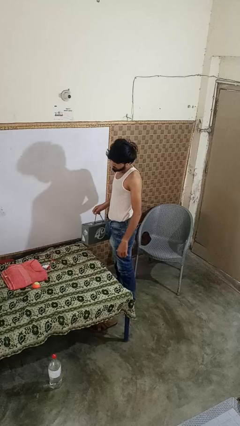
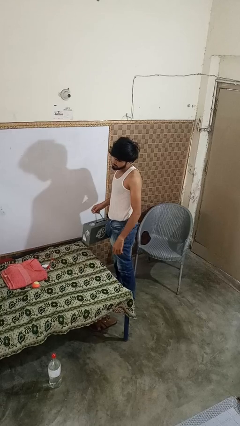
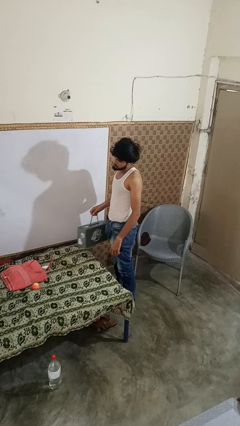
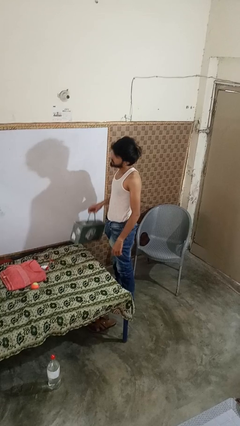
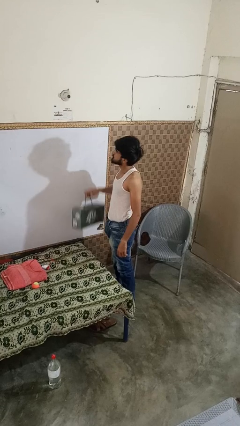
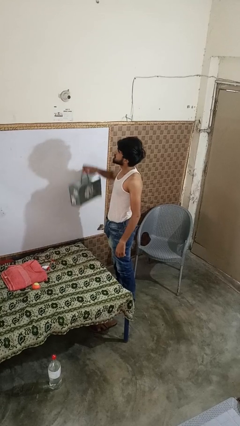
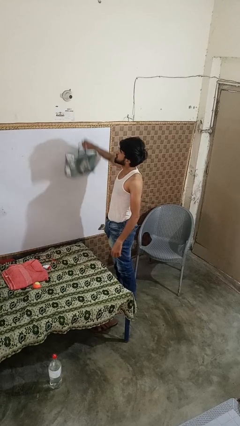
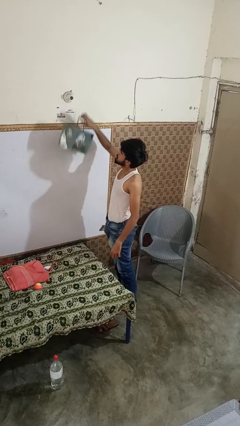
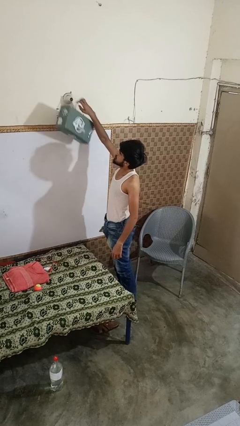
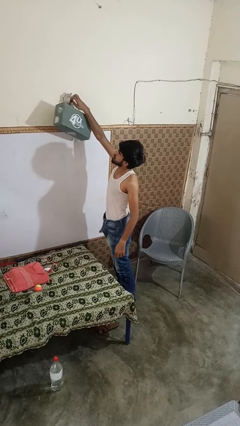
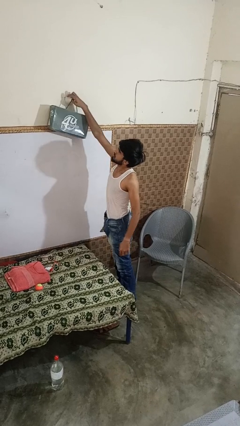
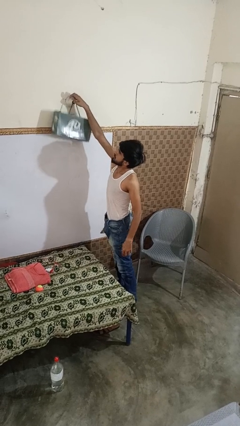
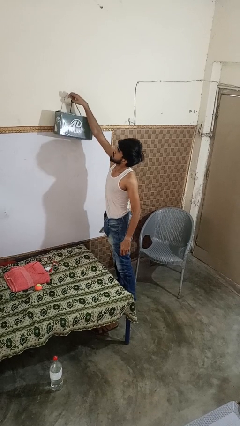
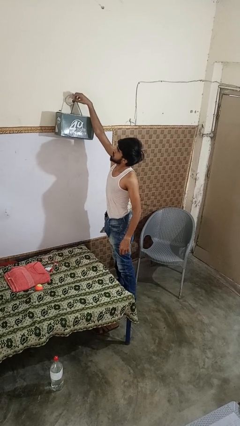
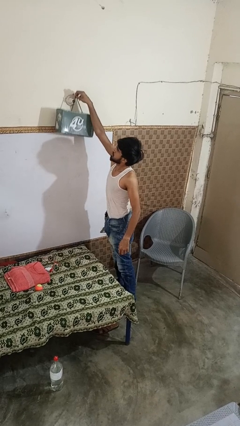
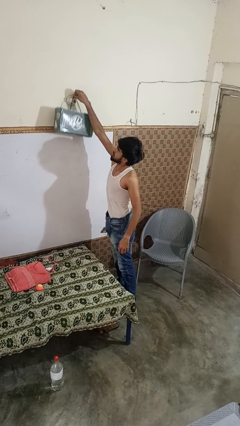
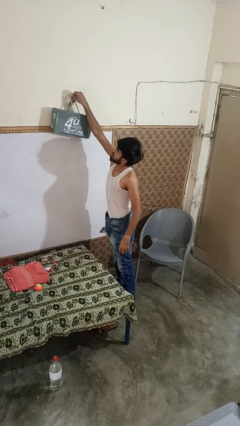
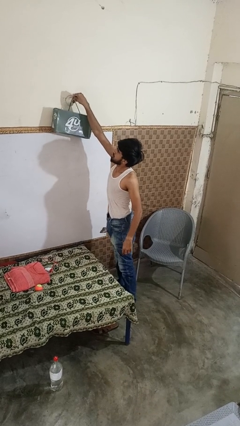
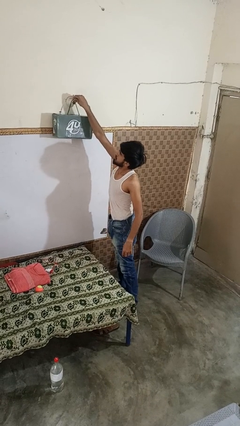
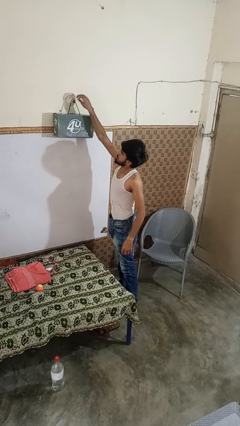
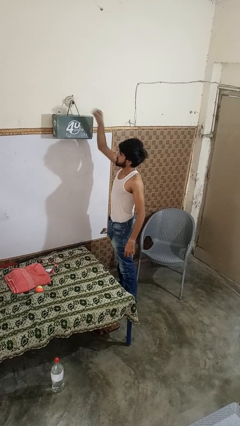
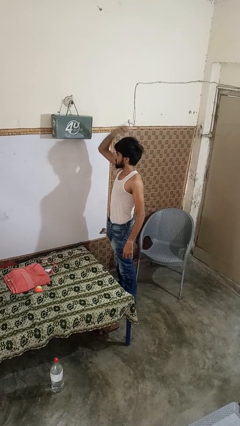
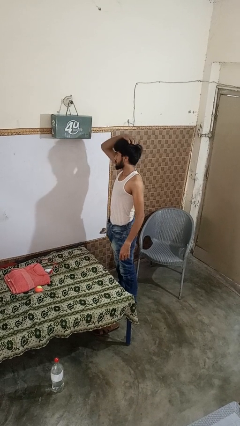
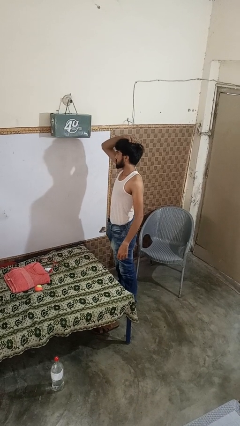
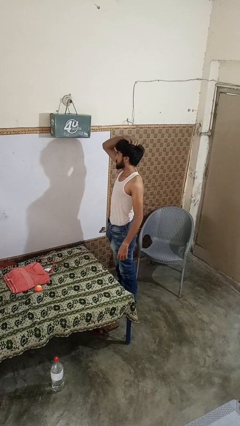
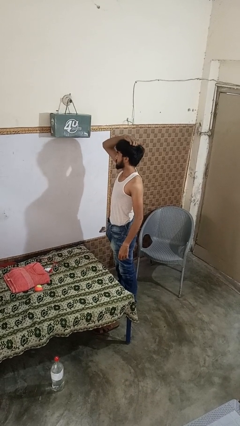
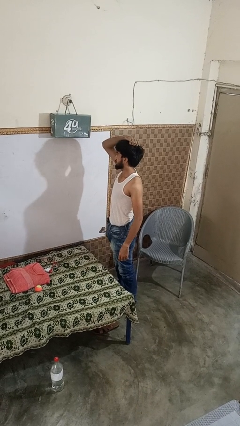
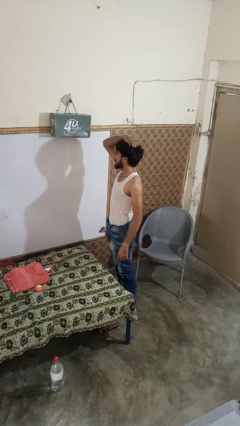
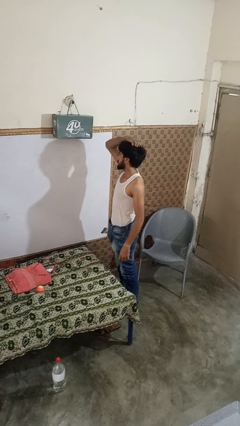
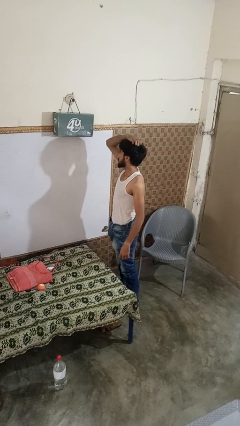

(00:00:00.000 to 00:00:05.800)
person puts up smoke detector

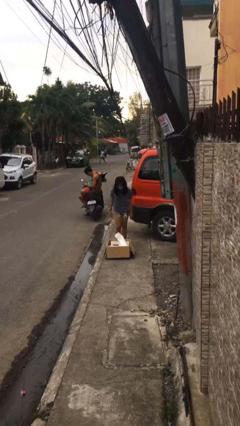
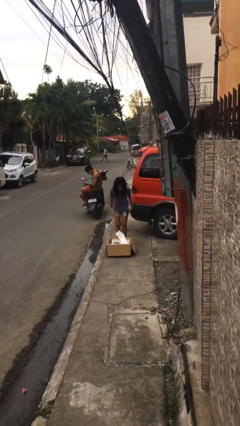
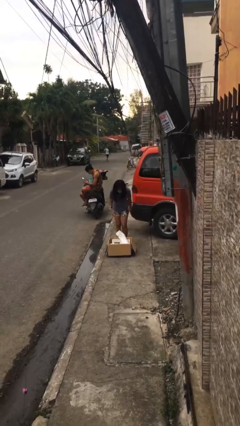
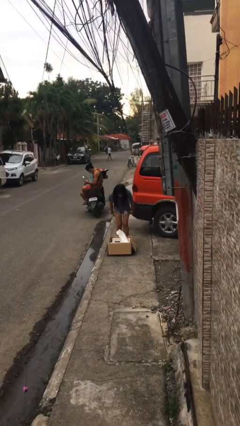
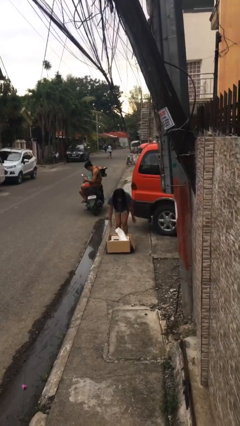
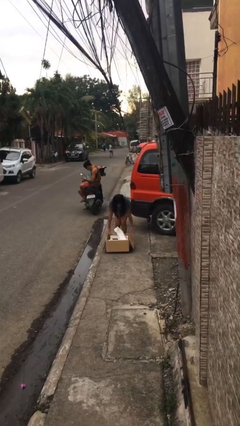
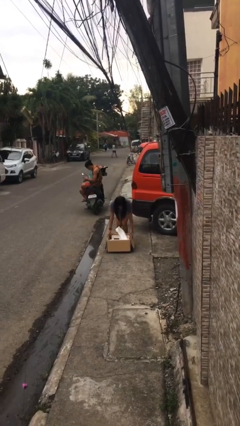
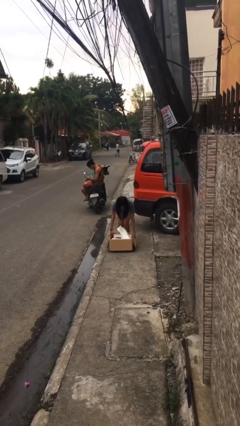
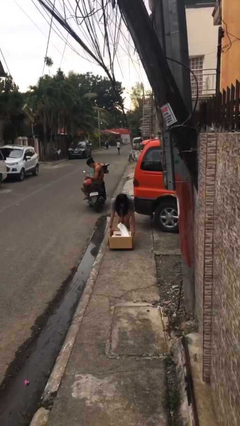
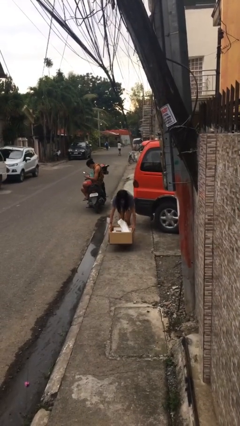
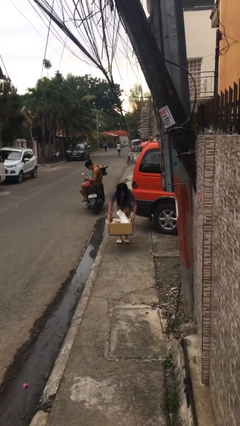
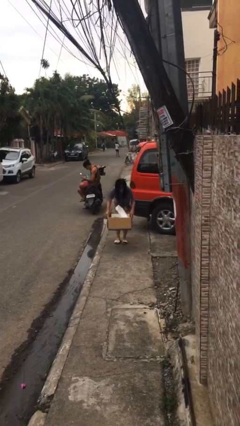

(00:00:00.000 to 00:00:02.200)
person picks up object from floor

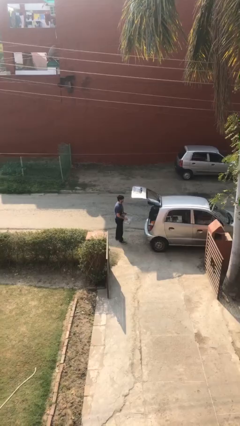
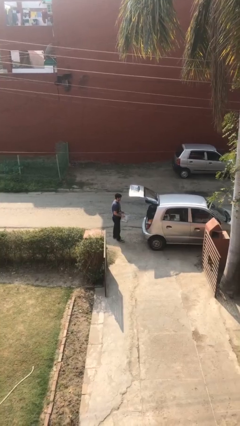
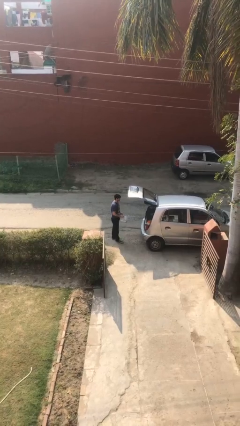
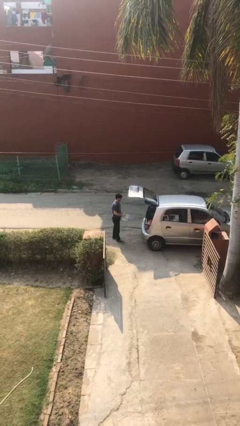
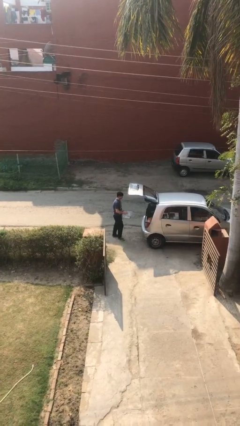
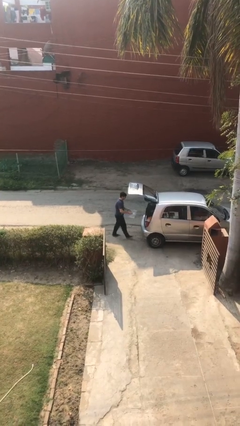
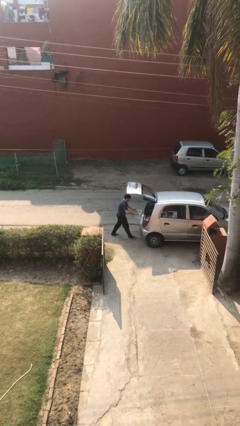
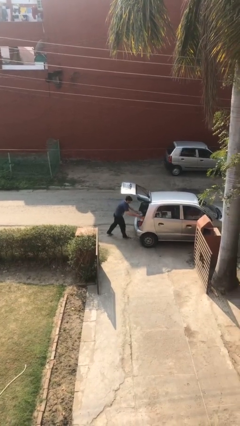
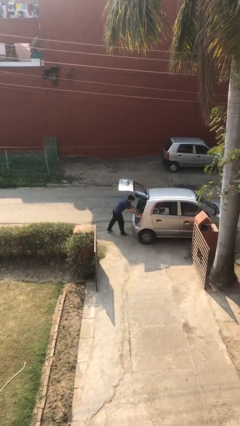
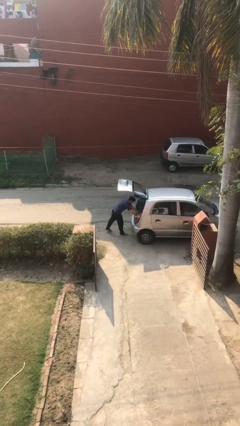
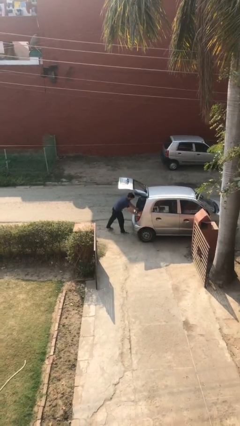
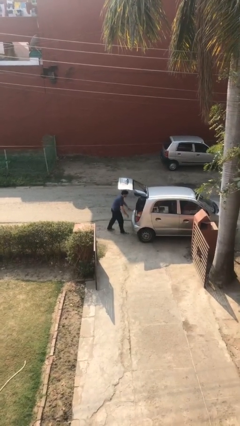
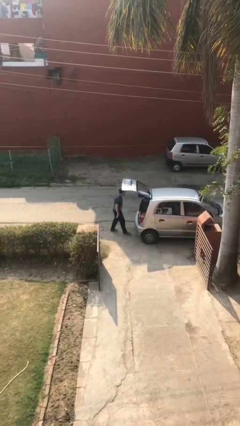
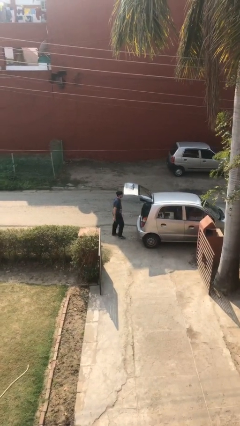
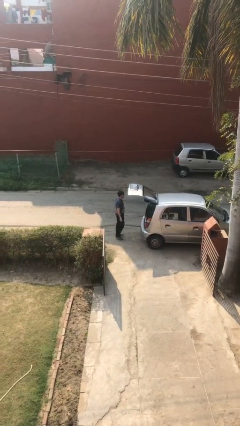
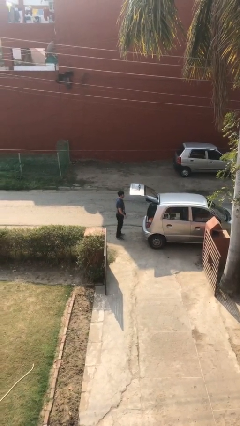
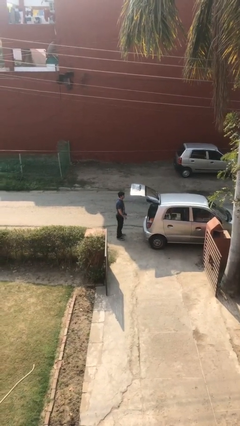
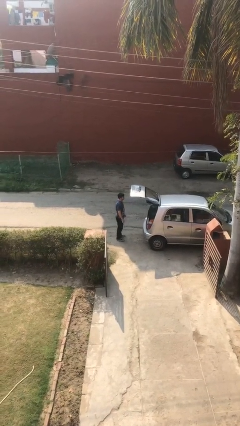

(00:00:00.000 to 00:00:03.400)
person loads car

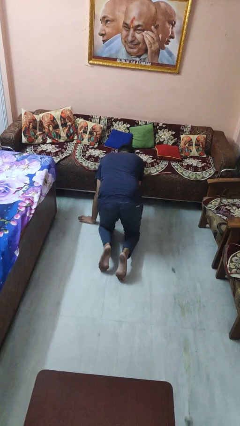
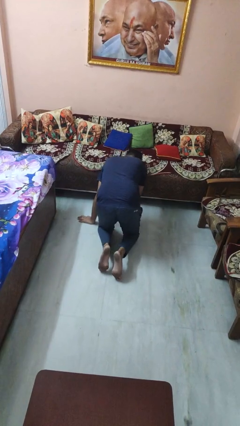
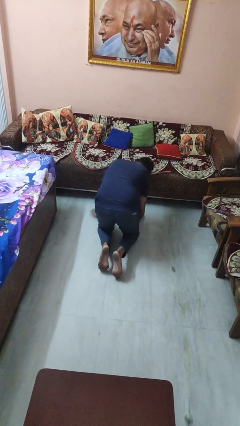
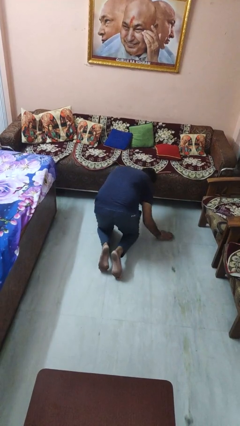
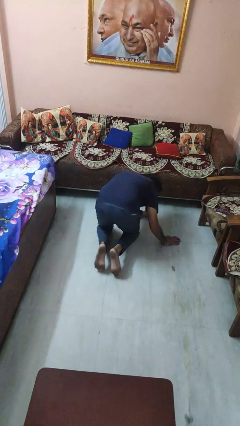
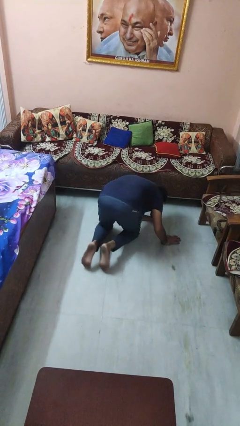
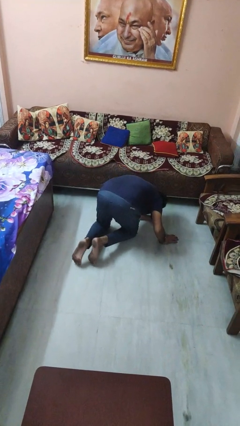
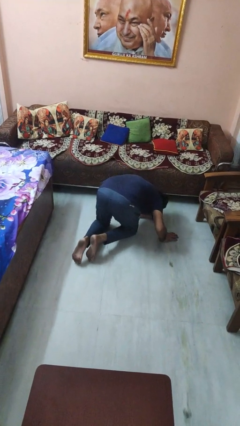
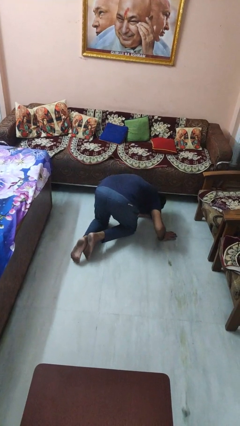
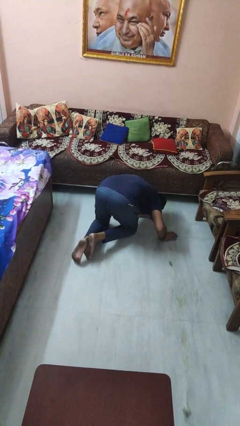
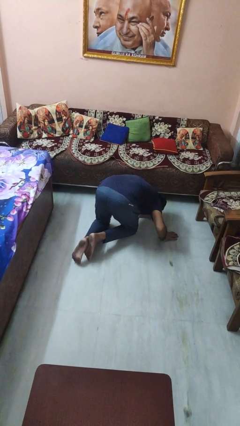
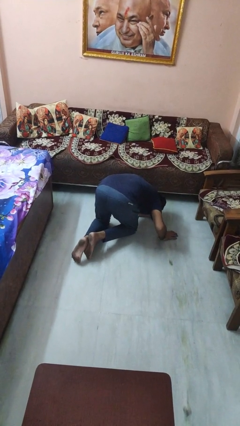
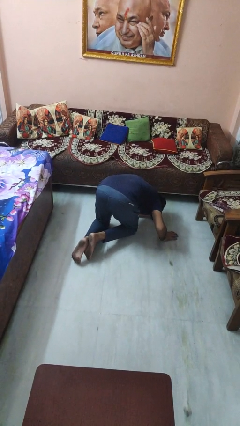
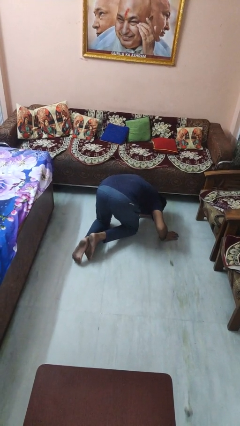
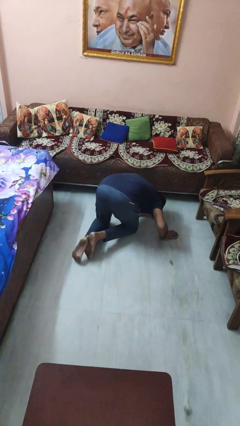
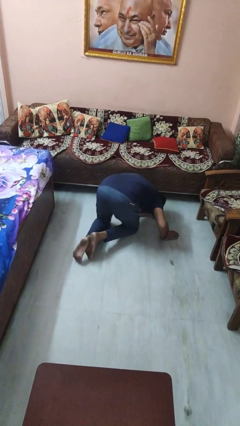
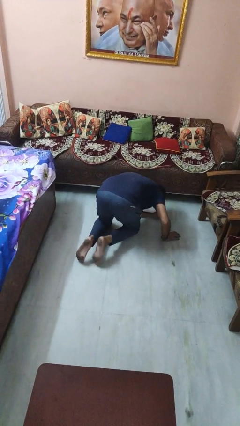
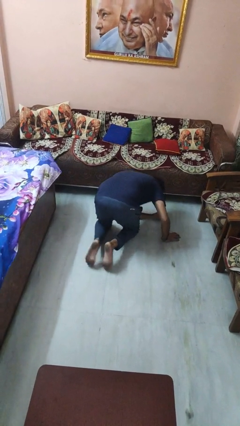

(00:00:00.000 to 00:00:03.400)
person searches under couch

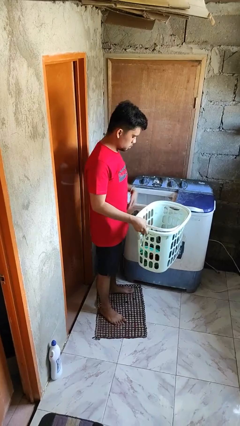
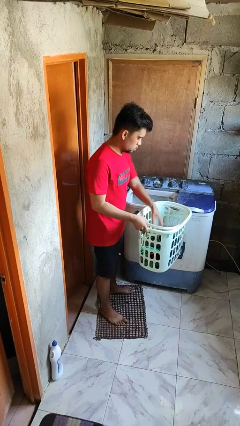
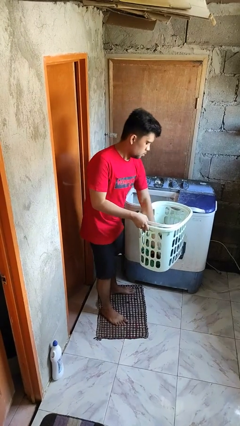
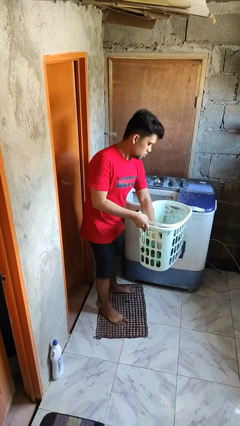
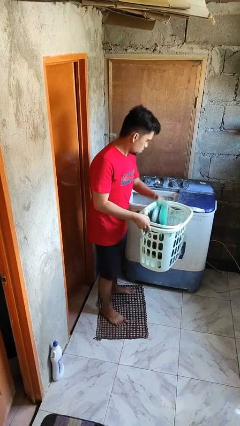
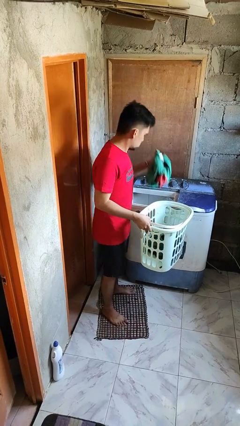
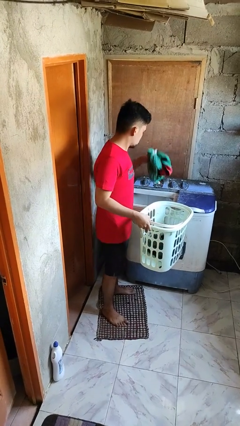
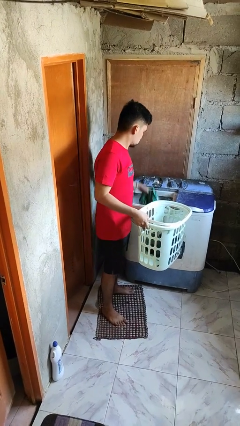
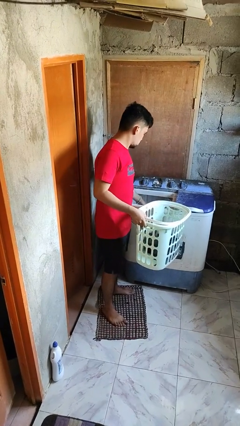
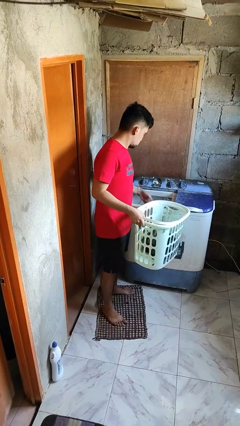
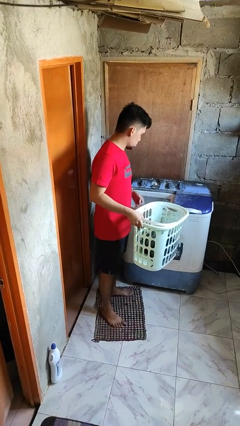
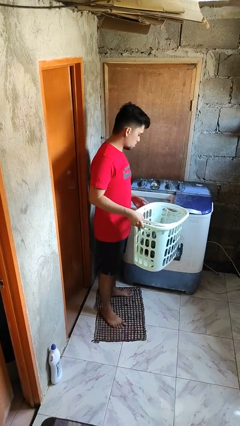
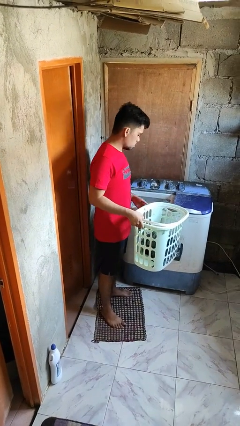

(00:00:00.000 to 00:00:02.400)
person loads clotheswasher
